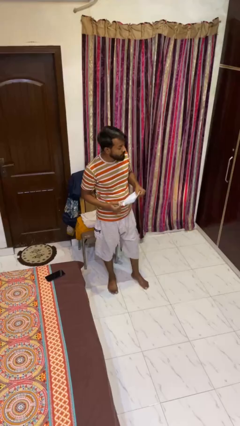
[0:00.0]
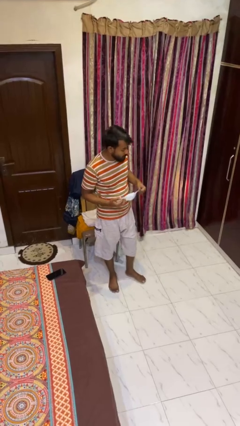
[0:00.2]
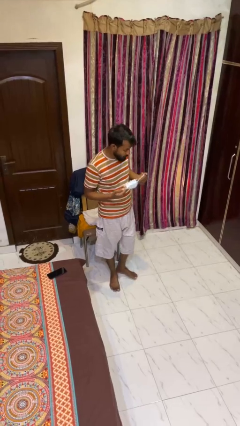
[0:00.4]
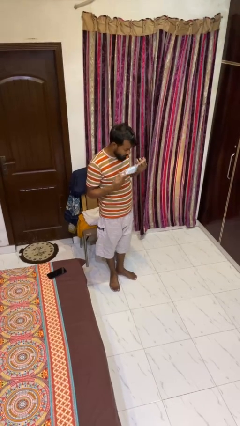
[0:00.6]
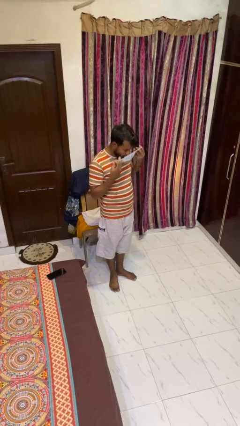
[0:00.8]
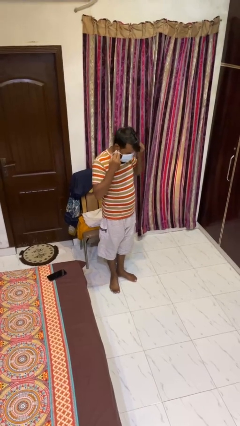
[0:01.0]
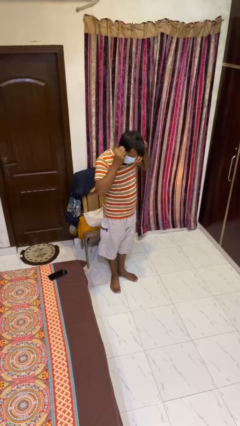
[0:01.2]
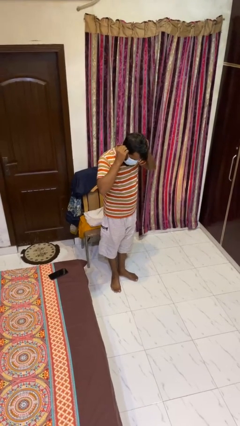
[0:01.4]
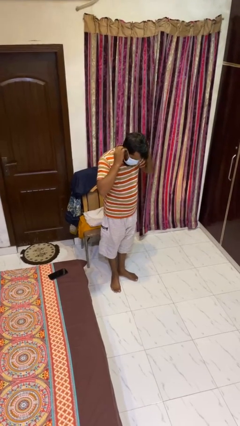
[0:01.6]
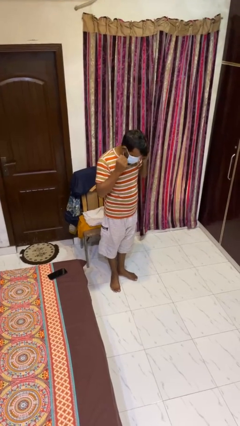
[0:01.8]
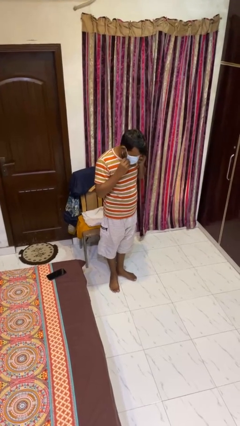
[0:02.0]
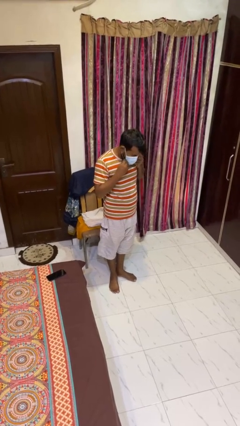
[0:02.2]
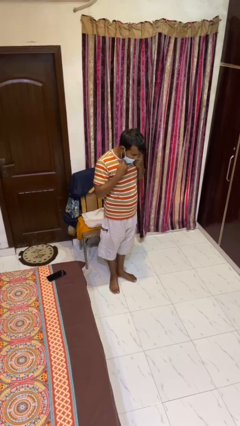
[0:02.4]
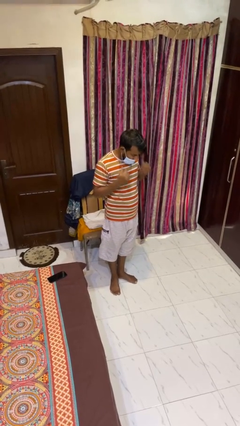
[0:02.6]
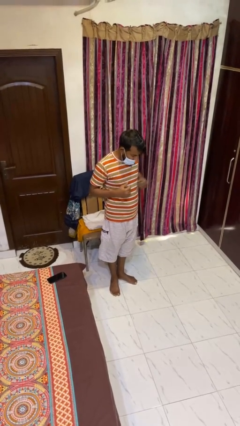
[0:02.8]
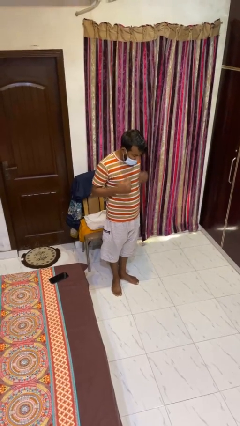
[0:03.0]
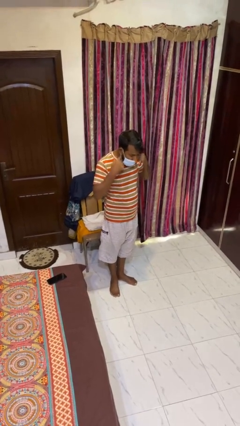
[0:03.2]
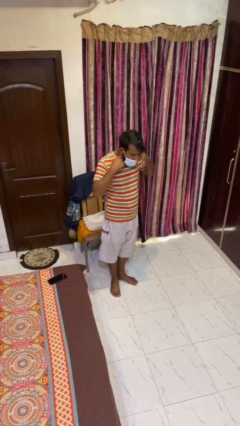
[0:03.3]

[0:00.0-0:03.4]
person puts on facemask

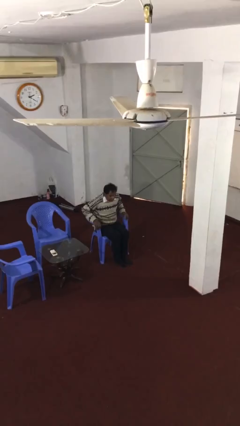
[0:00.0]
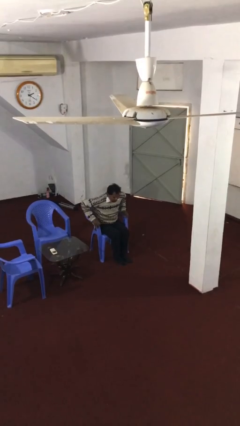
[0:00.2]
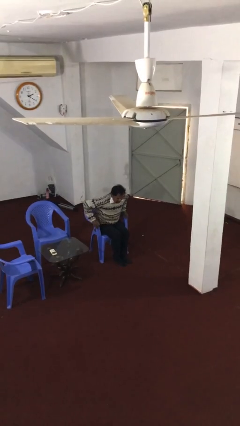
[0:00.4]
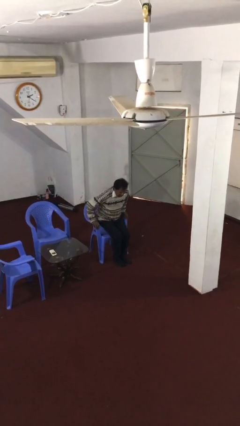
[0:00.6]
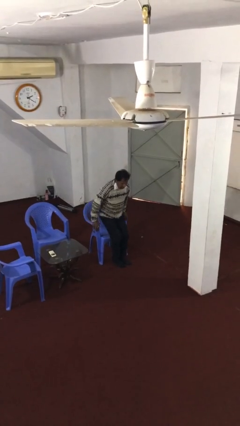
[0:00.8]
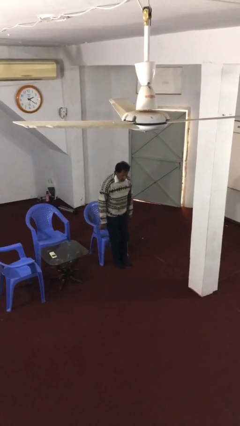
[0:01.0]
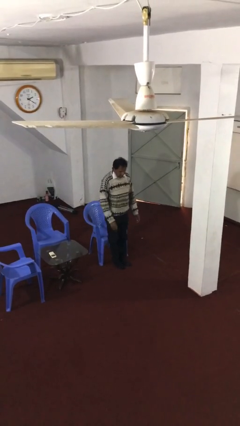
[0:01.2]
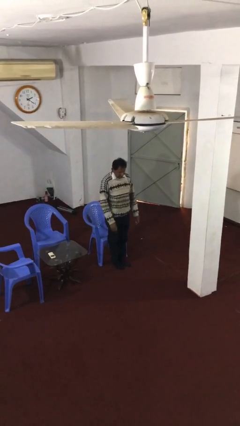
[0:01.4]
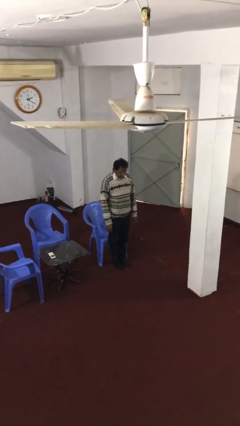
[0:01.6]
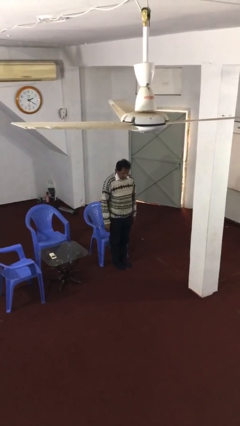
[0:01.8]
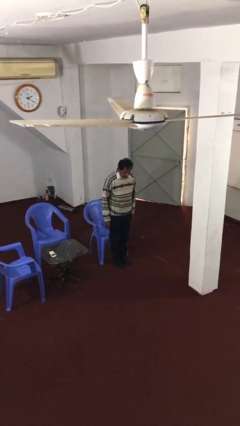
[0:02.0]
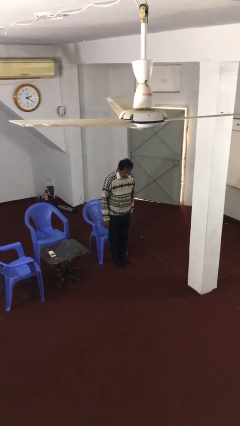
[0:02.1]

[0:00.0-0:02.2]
person stands up

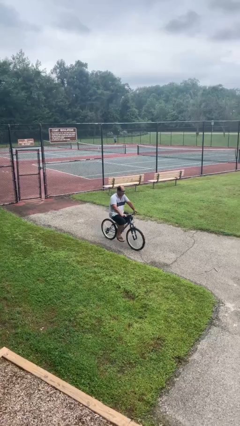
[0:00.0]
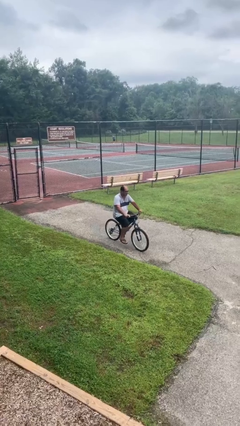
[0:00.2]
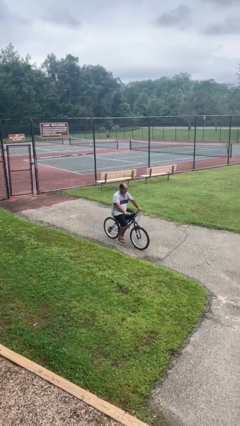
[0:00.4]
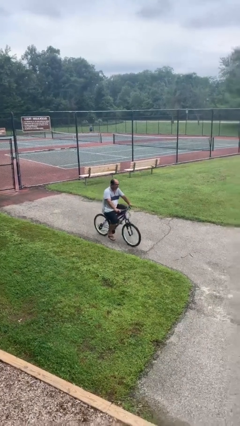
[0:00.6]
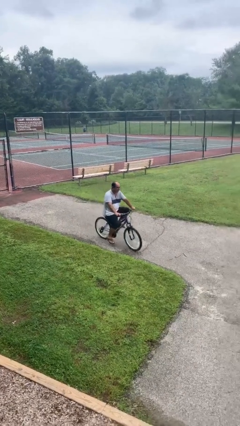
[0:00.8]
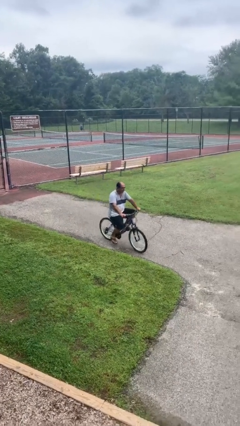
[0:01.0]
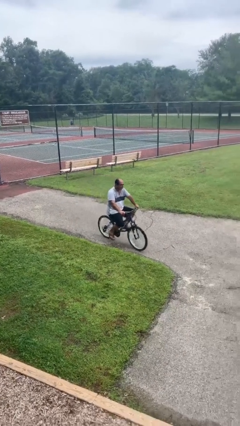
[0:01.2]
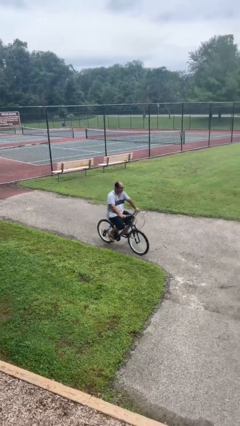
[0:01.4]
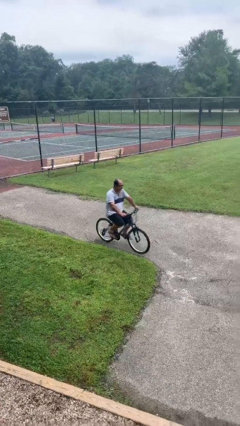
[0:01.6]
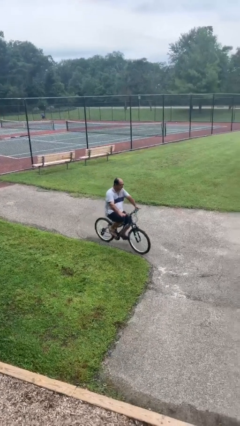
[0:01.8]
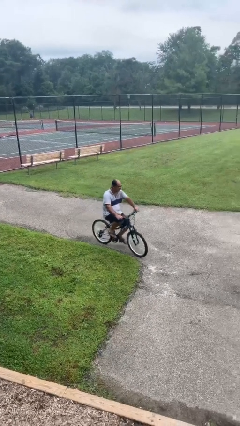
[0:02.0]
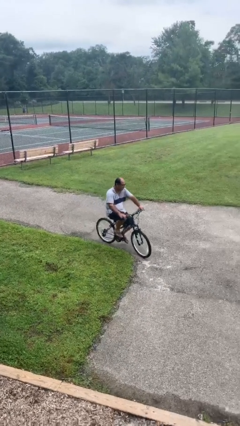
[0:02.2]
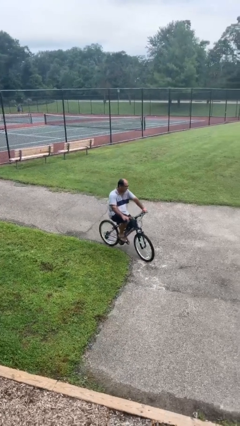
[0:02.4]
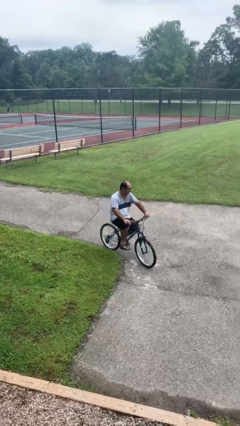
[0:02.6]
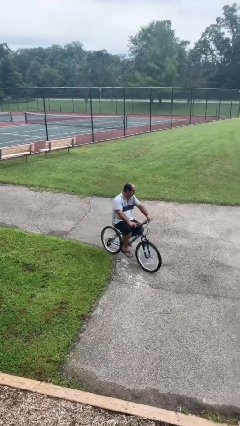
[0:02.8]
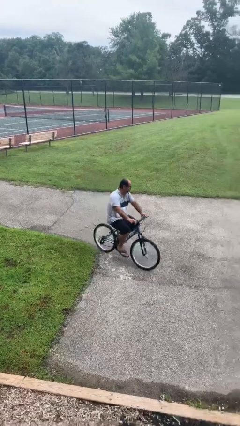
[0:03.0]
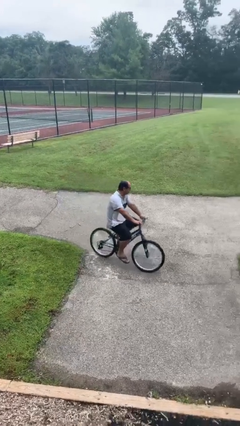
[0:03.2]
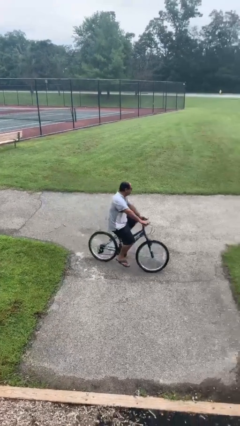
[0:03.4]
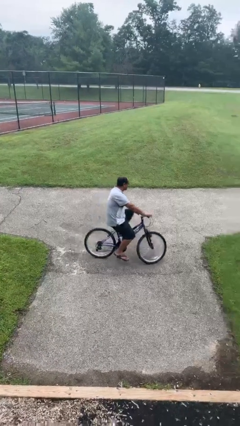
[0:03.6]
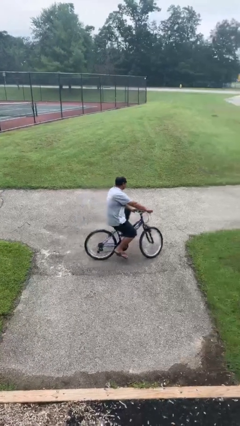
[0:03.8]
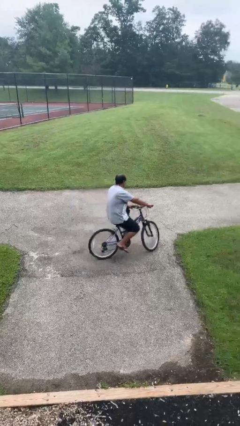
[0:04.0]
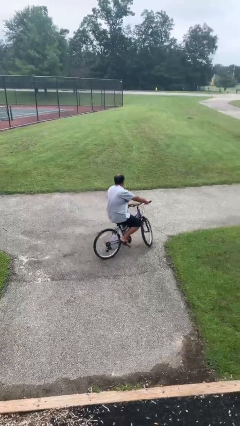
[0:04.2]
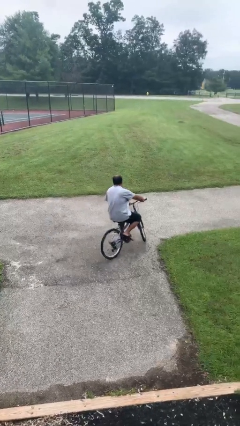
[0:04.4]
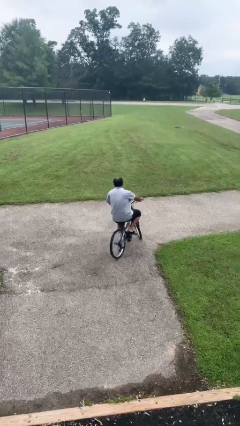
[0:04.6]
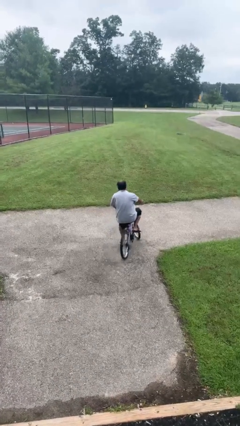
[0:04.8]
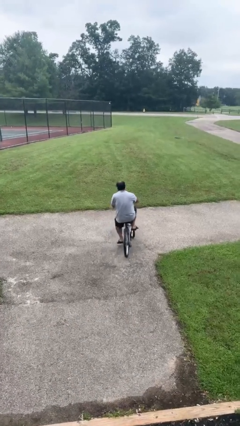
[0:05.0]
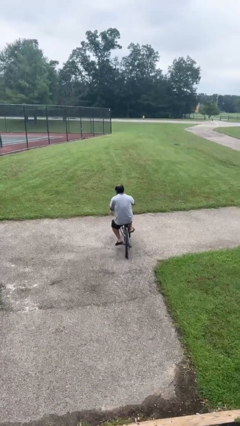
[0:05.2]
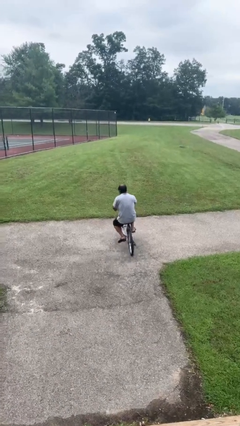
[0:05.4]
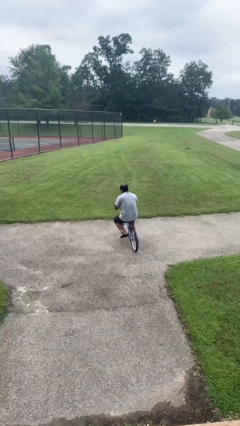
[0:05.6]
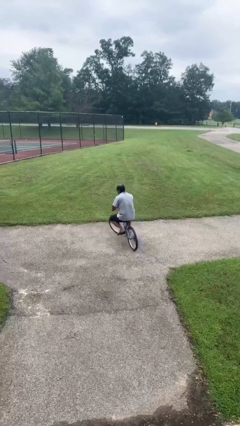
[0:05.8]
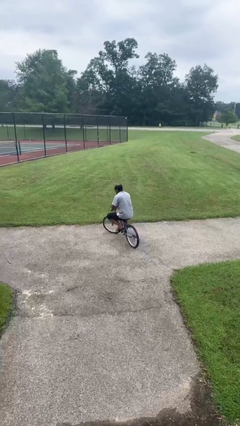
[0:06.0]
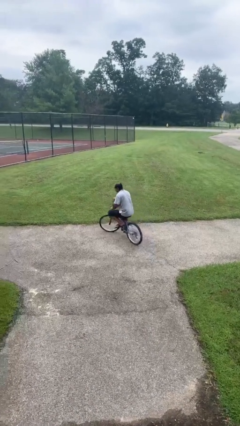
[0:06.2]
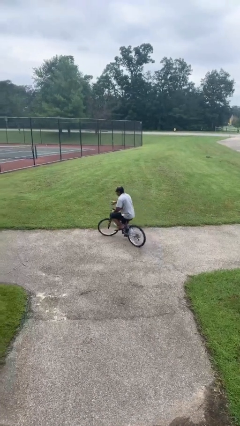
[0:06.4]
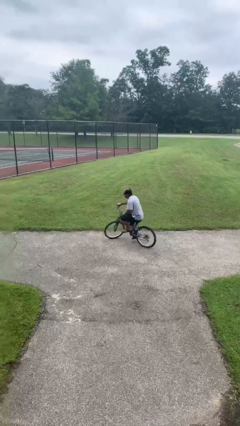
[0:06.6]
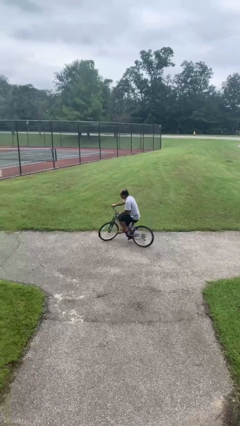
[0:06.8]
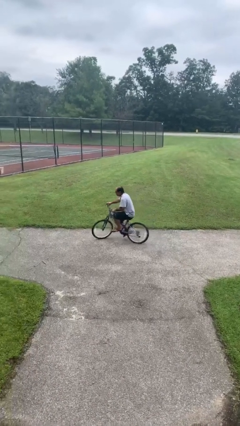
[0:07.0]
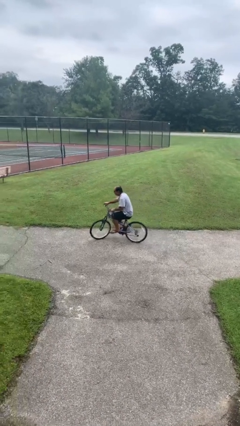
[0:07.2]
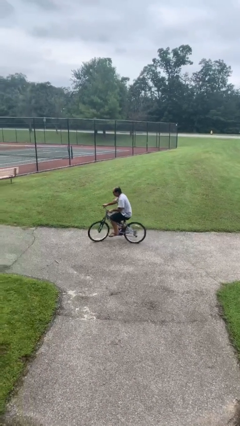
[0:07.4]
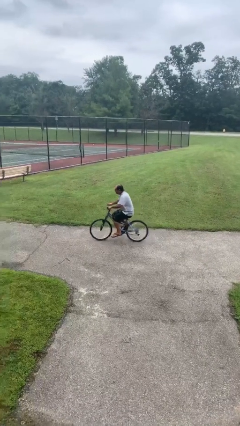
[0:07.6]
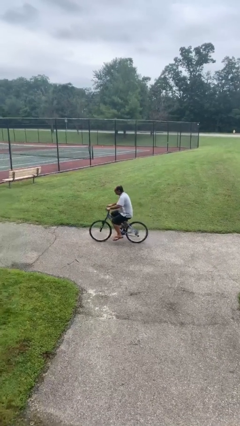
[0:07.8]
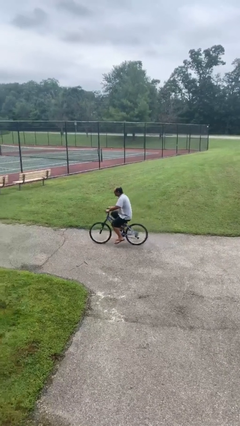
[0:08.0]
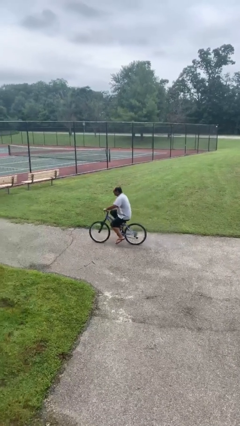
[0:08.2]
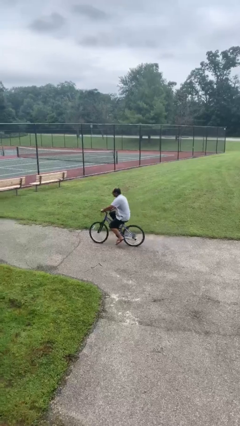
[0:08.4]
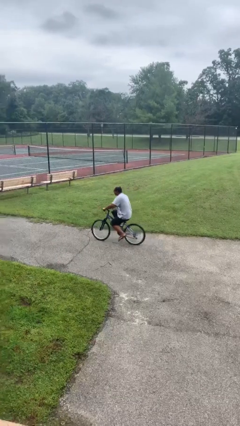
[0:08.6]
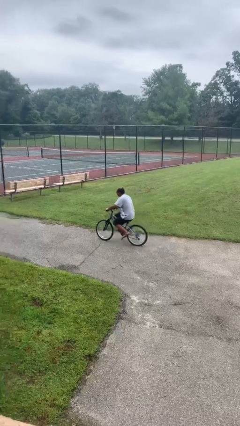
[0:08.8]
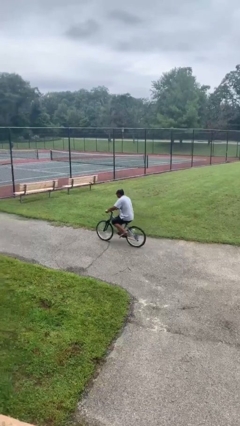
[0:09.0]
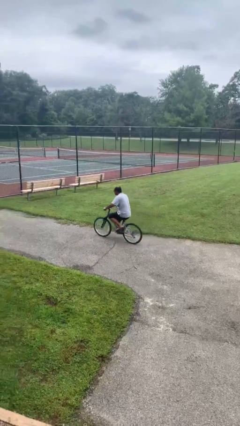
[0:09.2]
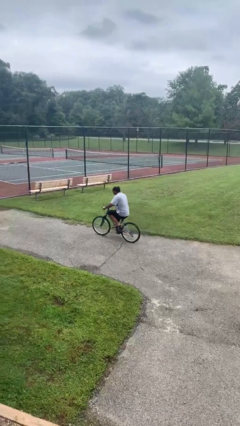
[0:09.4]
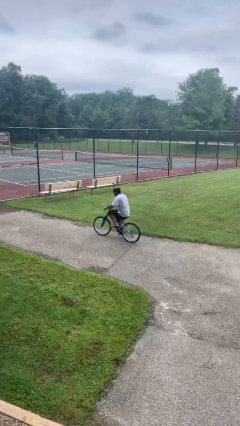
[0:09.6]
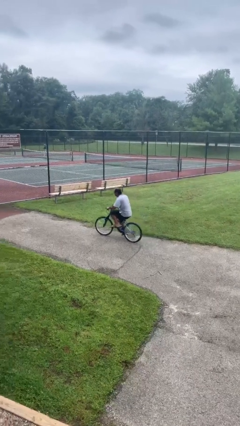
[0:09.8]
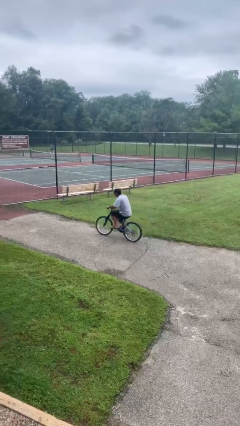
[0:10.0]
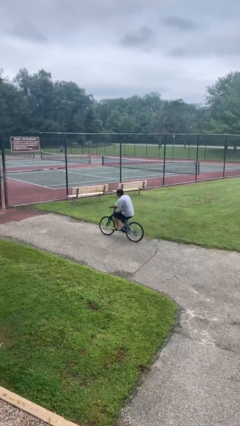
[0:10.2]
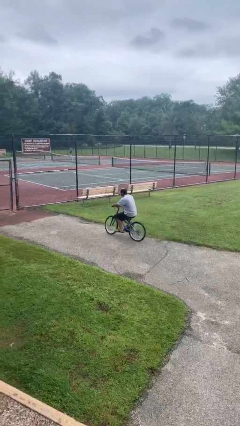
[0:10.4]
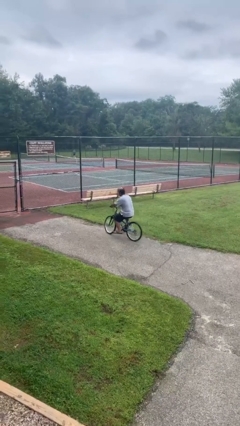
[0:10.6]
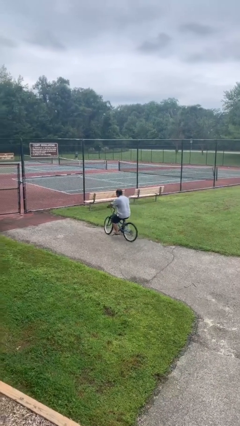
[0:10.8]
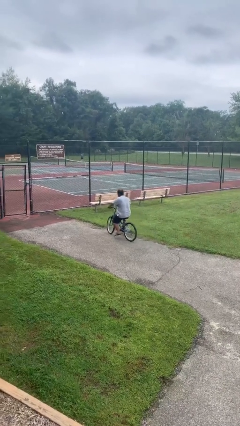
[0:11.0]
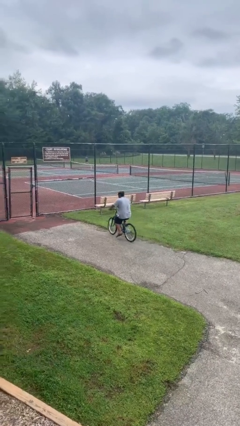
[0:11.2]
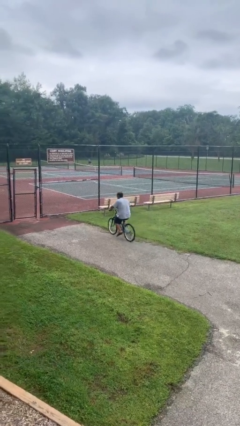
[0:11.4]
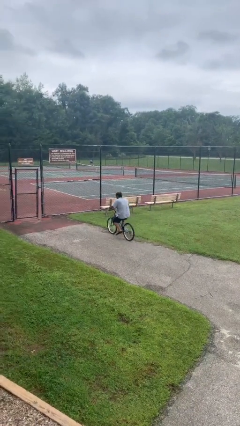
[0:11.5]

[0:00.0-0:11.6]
person rides bicycle

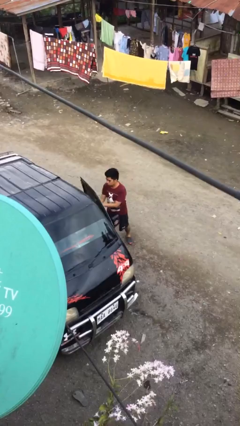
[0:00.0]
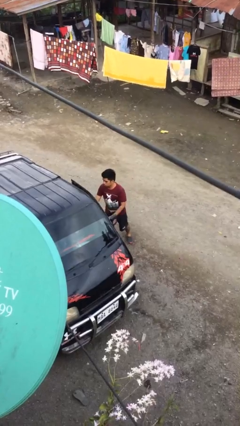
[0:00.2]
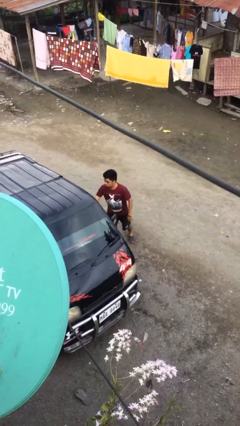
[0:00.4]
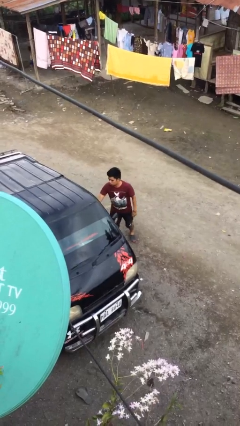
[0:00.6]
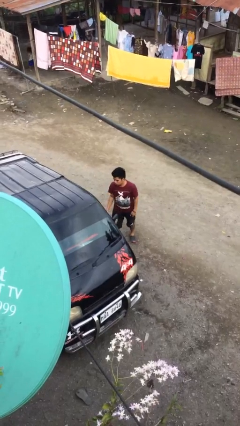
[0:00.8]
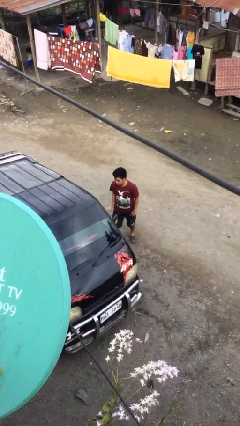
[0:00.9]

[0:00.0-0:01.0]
person closes car door
